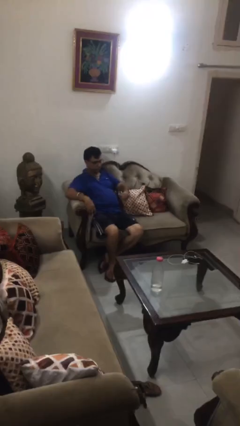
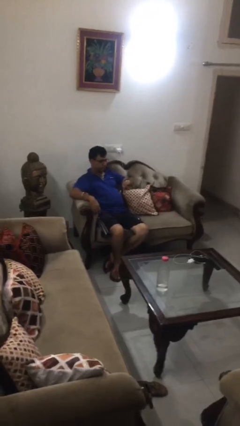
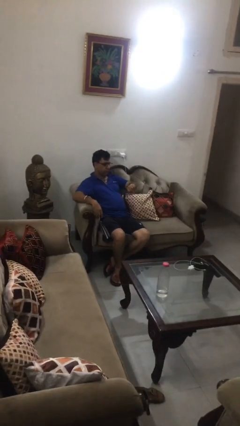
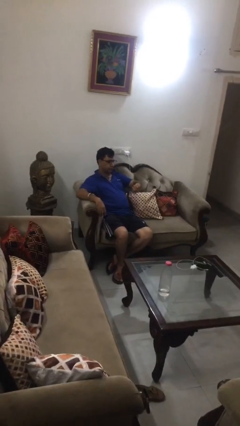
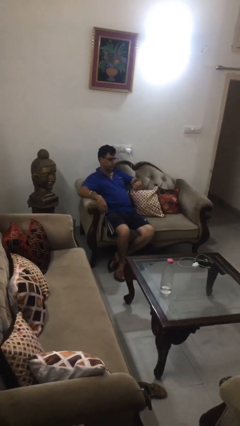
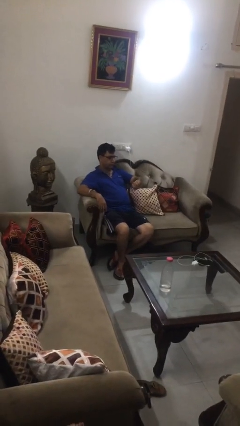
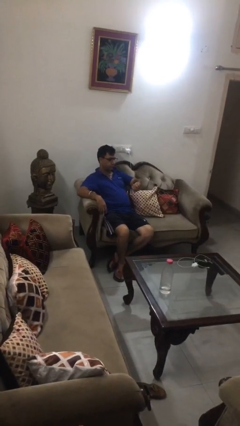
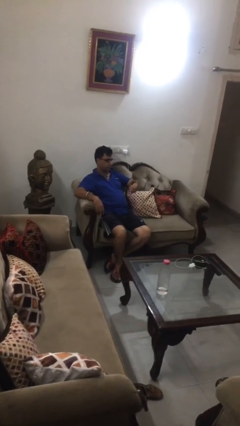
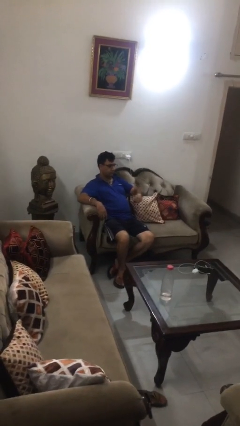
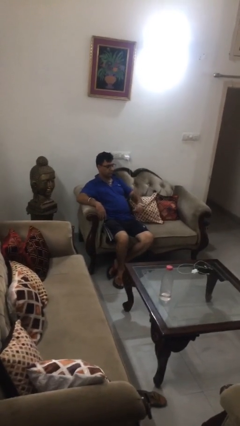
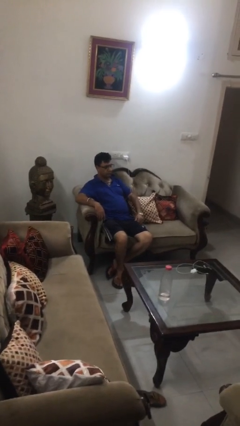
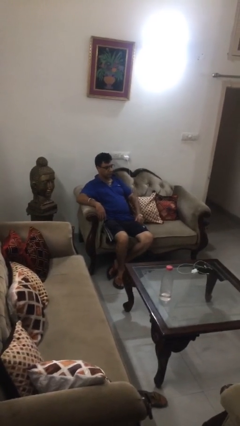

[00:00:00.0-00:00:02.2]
person looks at wristwatch

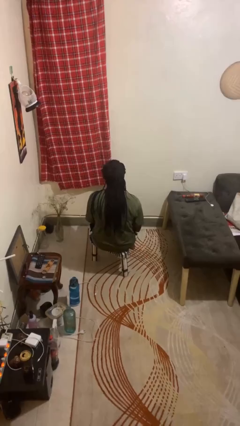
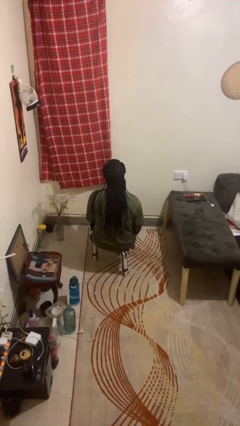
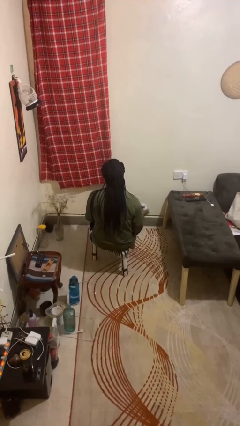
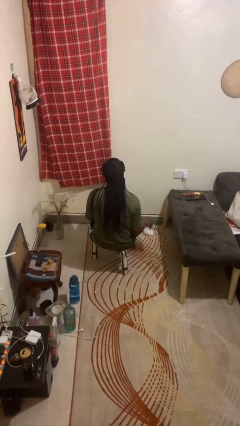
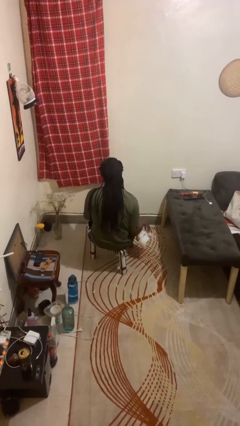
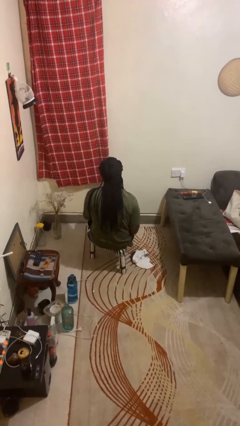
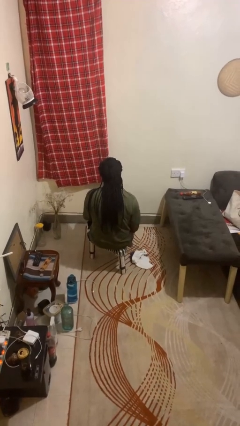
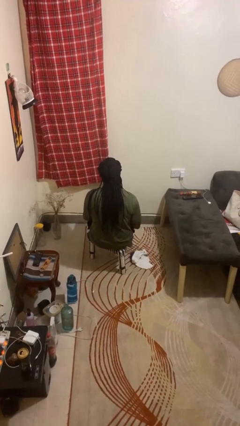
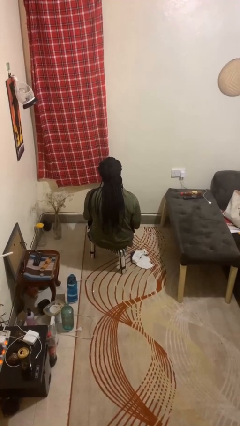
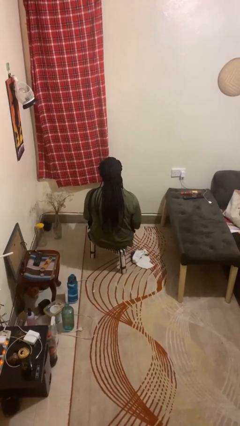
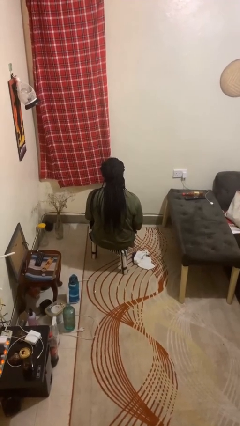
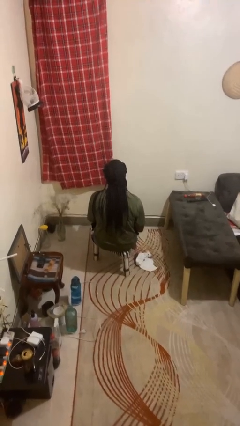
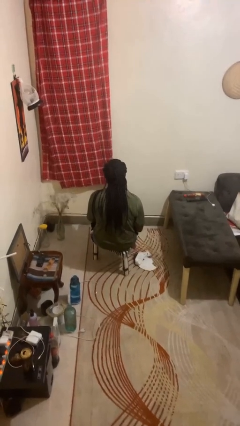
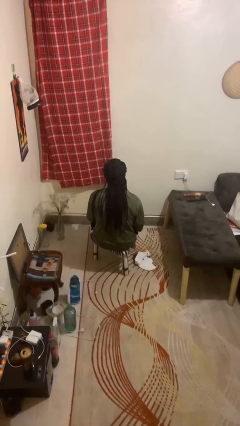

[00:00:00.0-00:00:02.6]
person throws object to ground

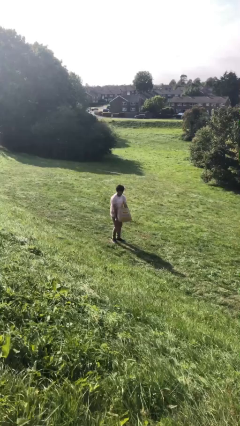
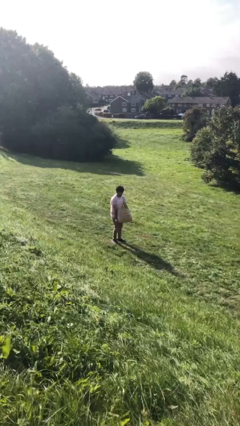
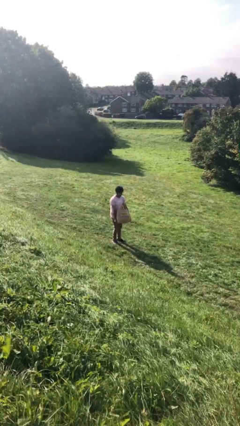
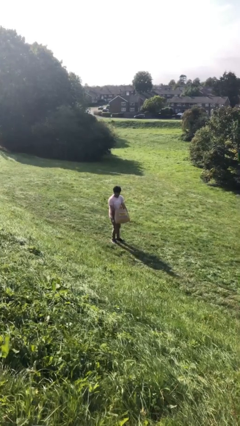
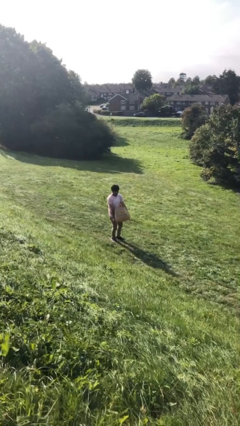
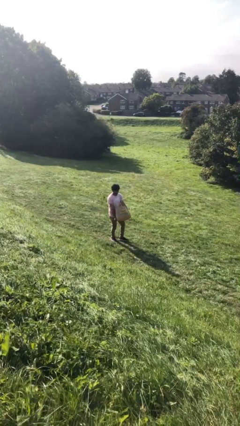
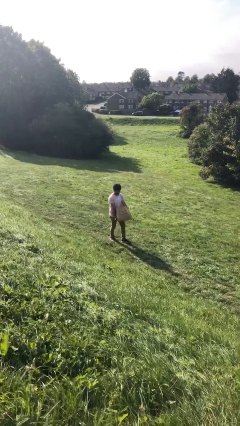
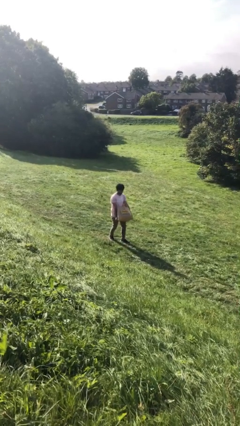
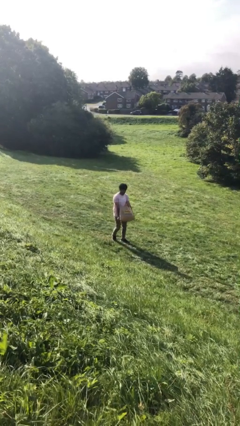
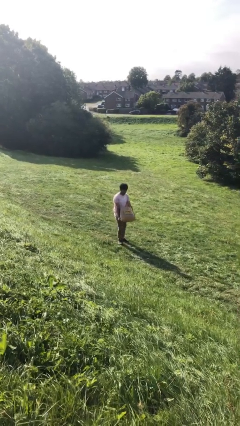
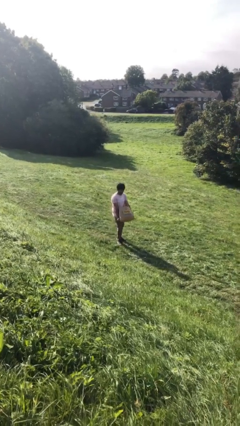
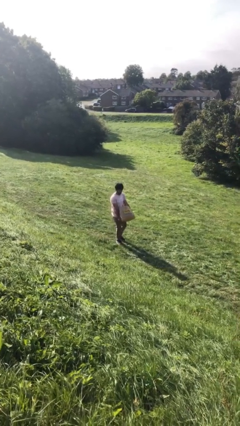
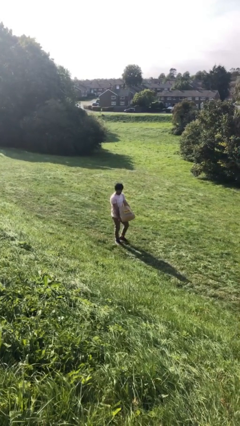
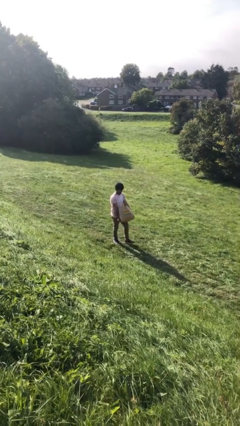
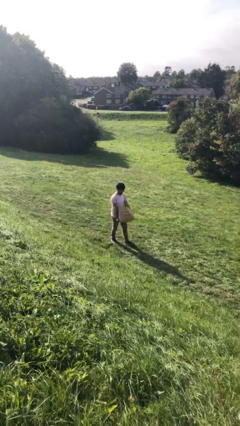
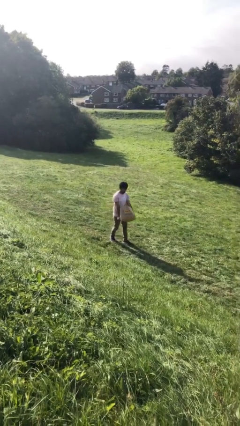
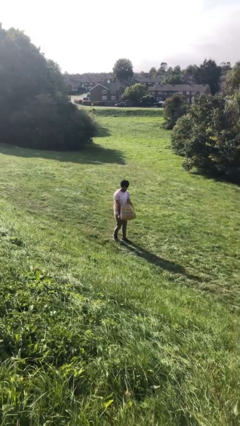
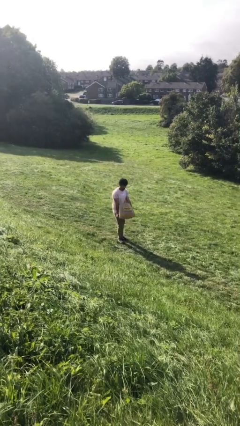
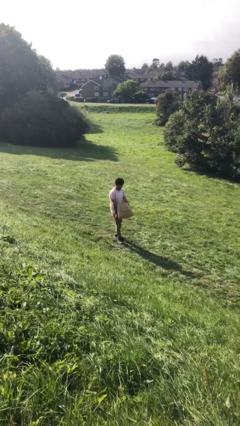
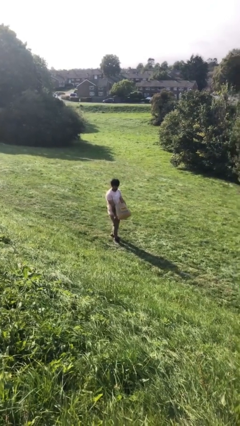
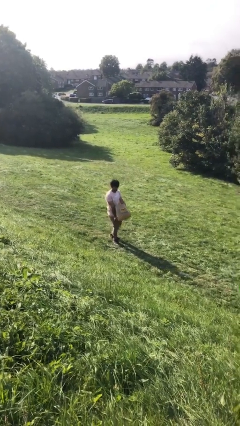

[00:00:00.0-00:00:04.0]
person carries heavy object

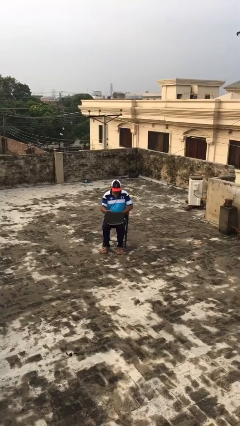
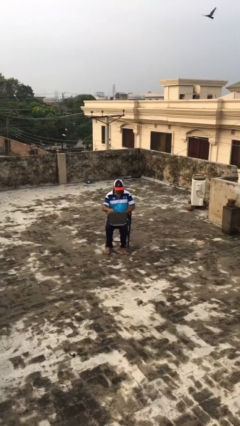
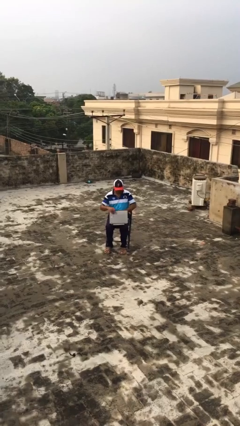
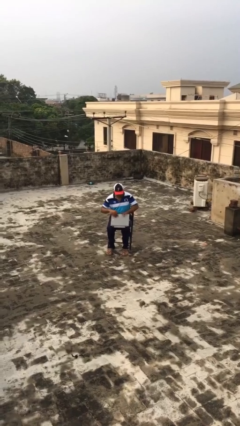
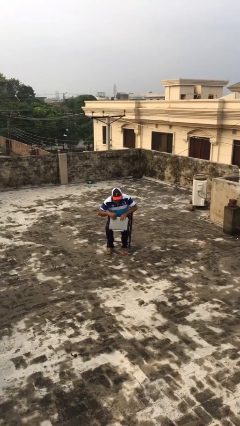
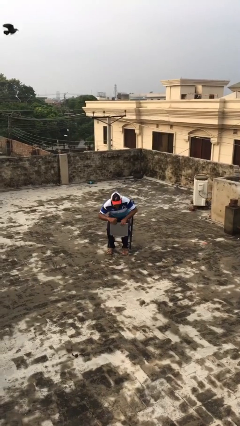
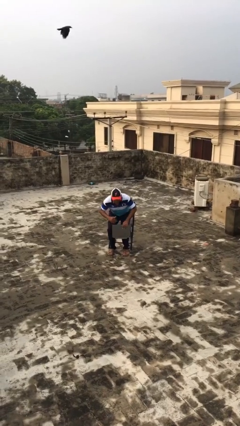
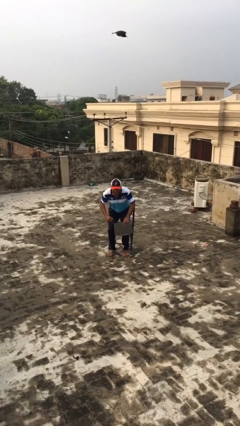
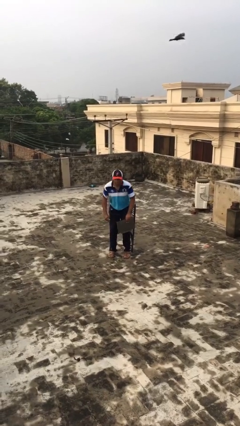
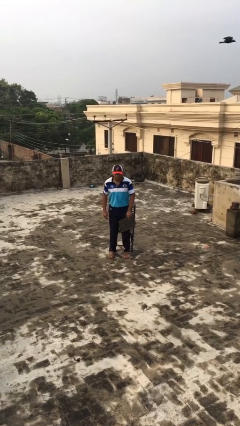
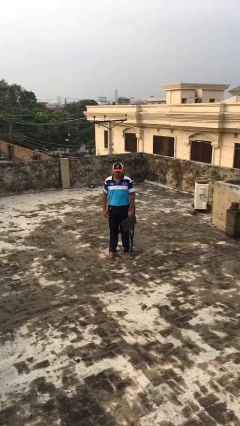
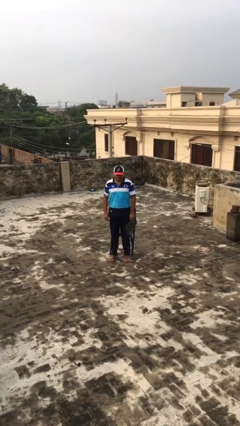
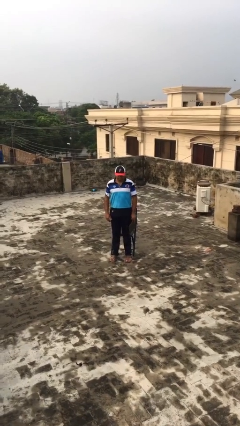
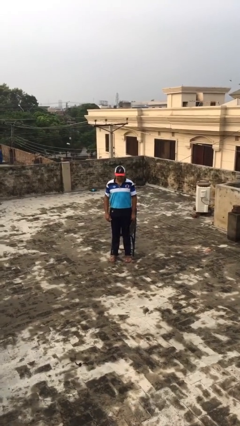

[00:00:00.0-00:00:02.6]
person stands up

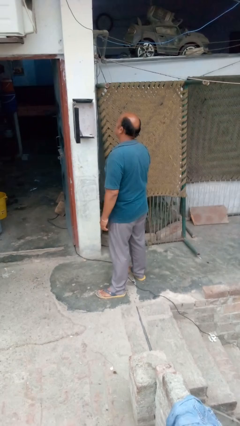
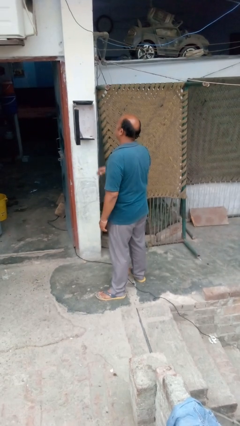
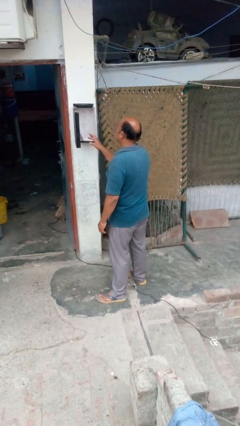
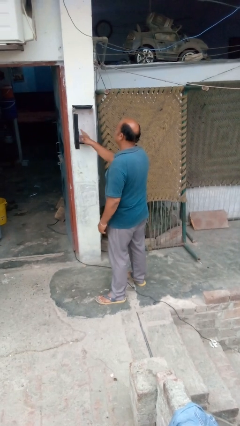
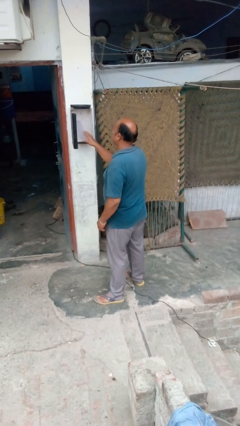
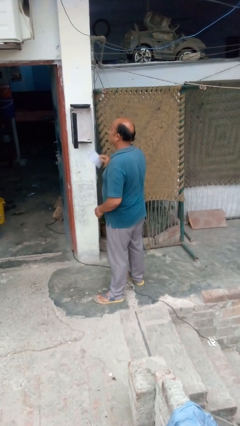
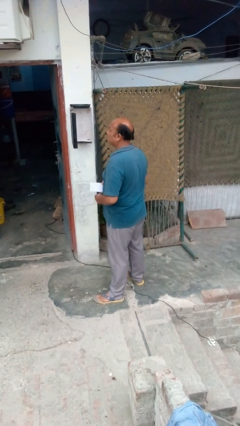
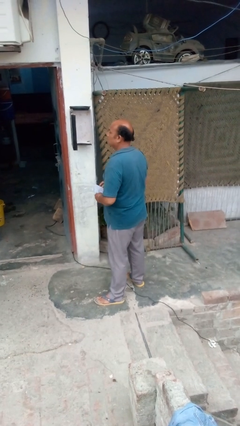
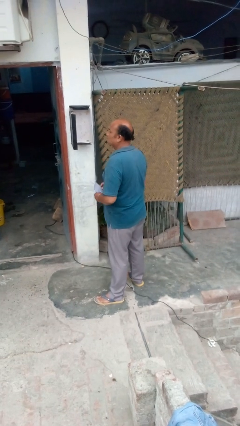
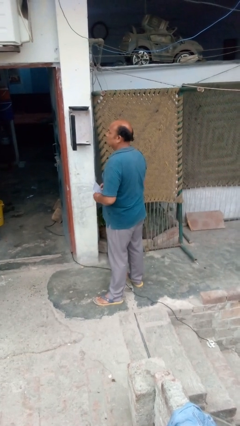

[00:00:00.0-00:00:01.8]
person takes letters from mailbox

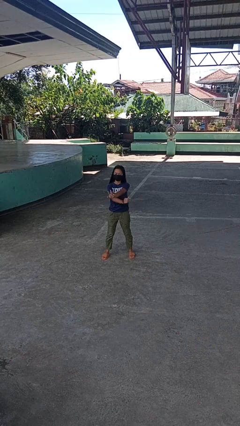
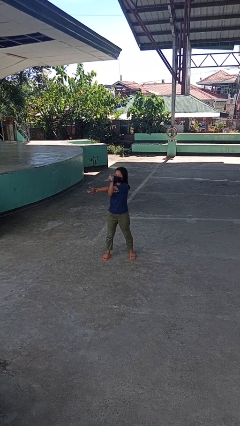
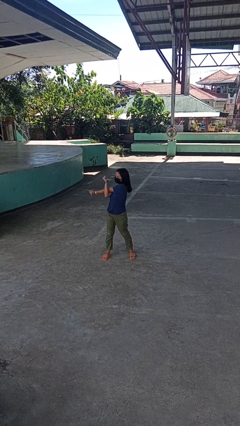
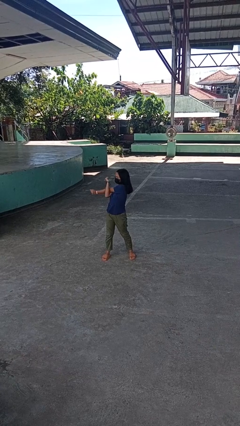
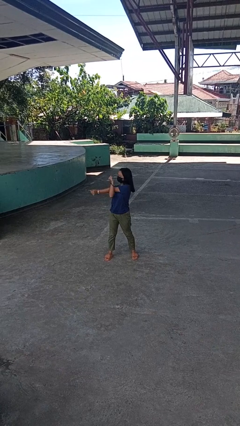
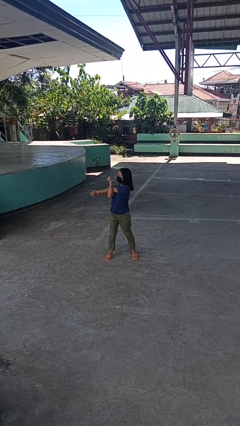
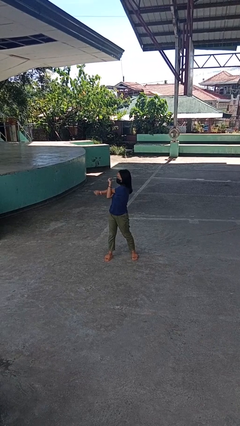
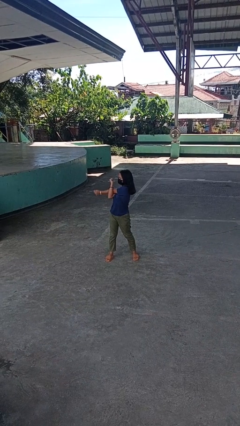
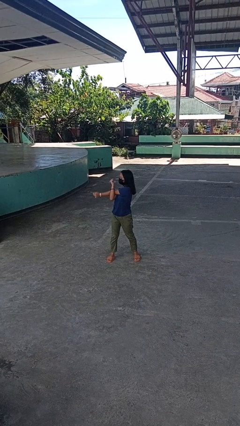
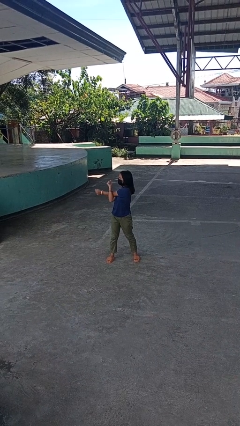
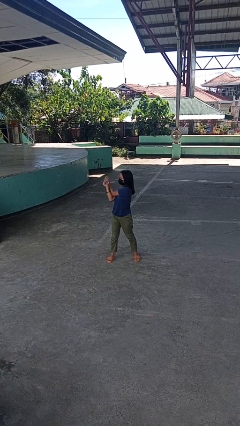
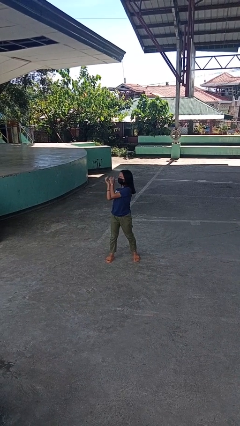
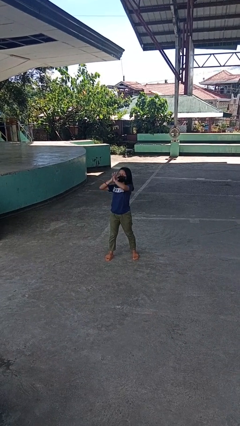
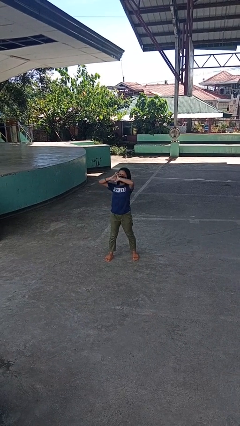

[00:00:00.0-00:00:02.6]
person stretches arms to side

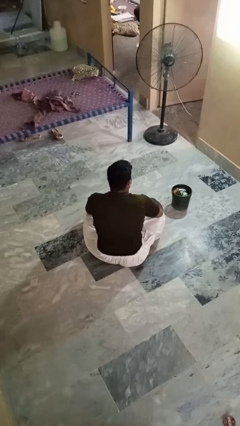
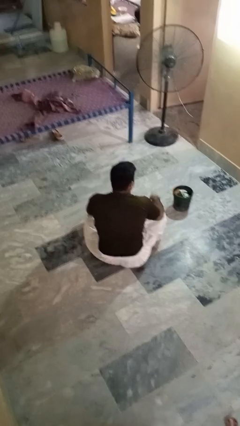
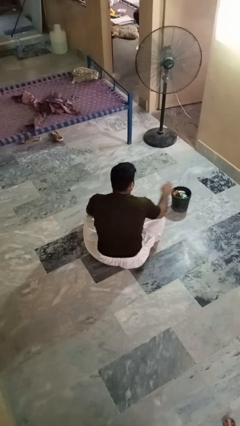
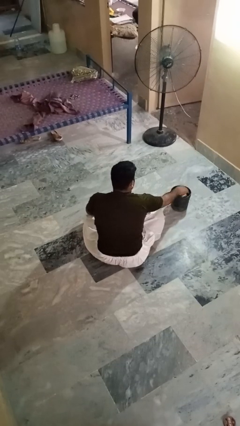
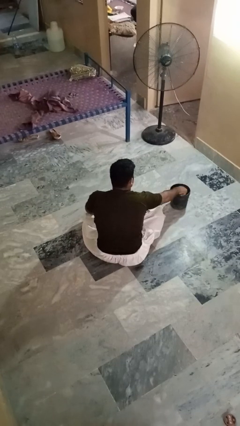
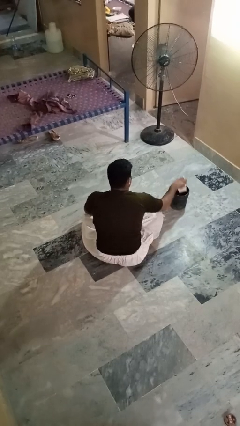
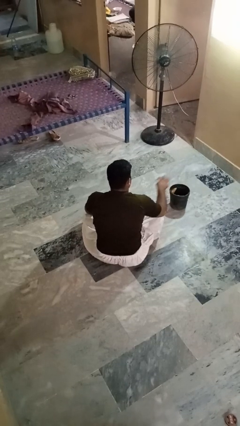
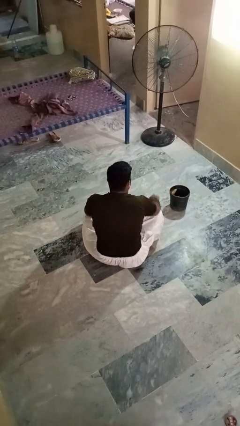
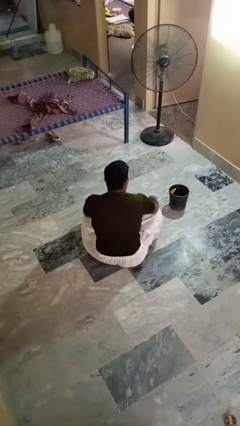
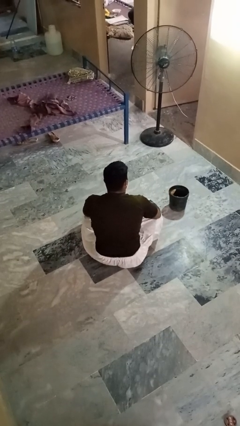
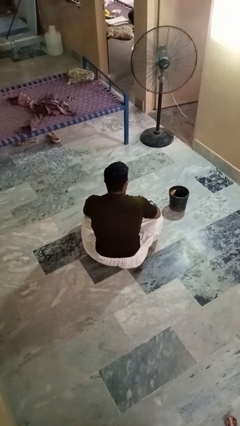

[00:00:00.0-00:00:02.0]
person takes object from basket
